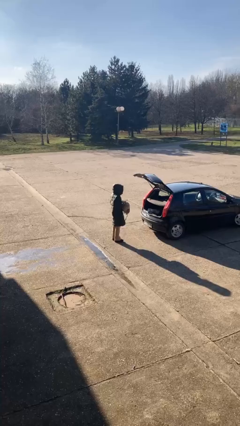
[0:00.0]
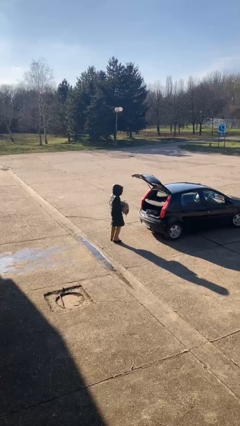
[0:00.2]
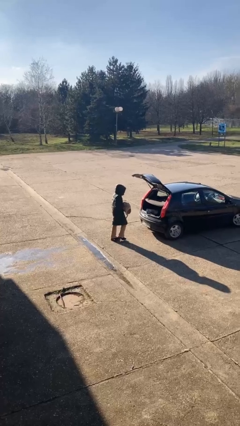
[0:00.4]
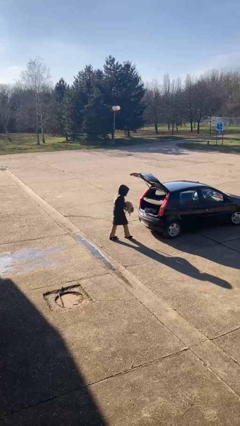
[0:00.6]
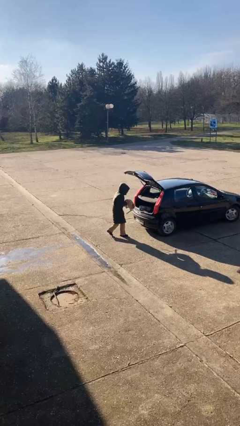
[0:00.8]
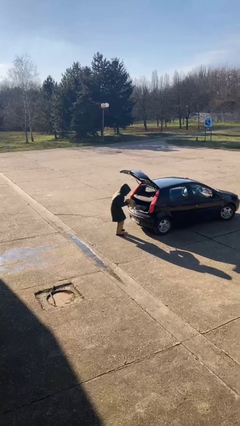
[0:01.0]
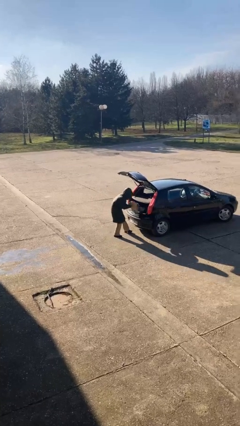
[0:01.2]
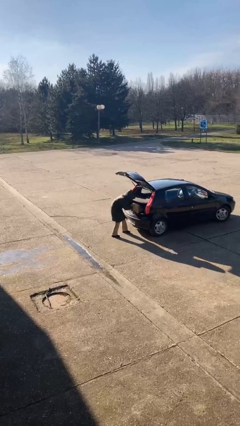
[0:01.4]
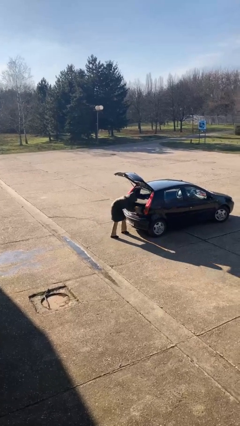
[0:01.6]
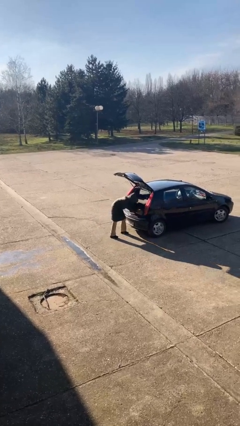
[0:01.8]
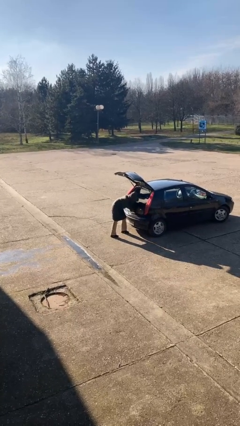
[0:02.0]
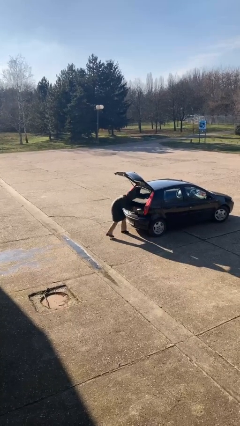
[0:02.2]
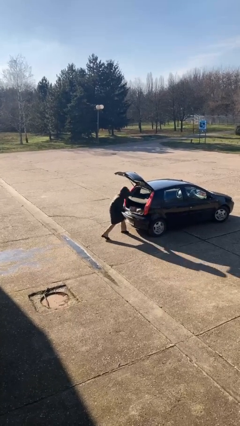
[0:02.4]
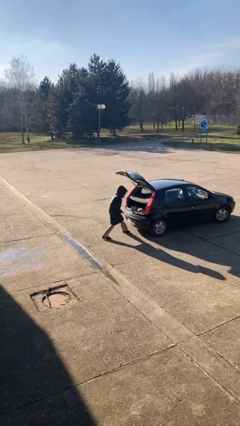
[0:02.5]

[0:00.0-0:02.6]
person loads car

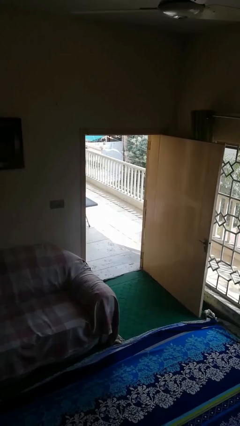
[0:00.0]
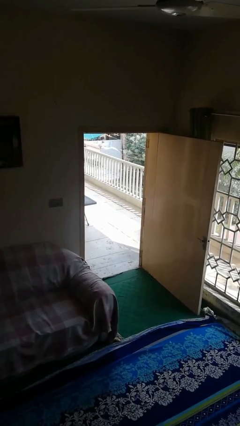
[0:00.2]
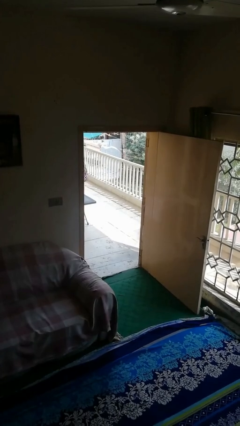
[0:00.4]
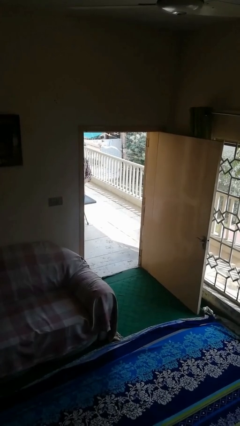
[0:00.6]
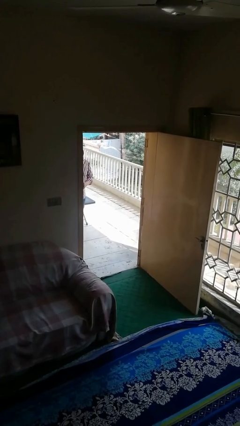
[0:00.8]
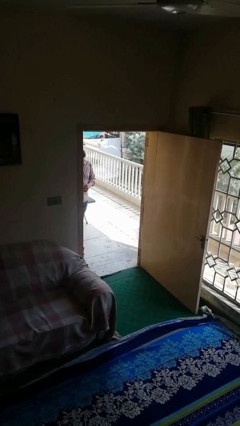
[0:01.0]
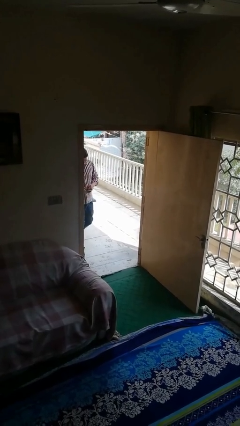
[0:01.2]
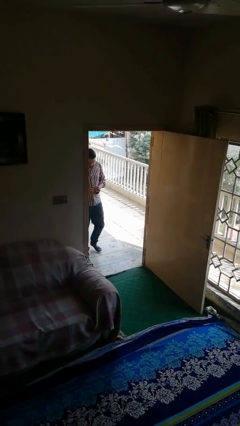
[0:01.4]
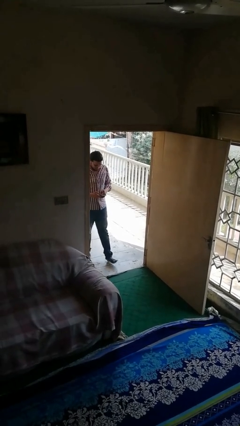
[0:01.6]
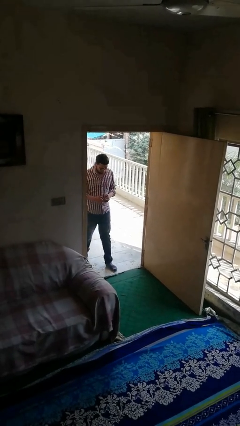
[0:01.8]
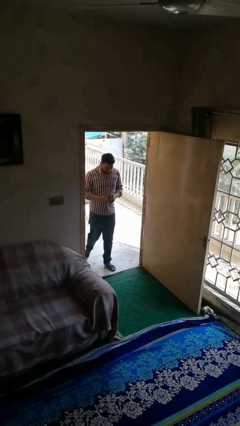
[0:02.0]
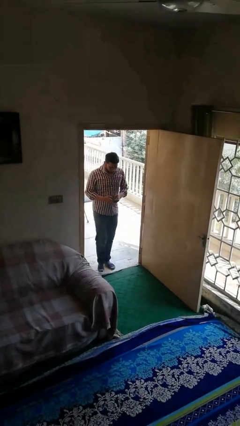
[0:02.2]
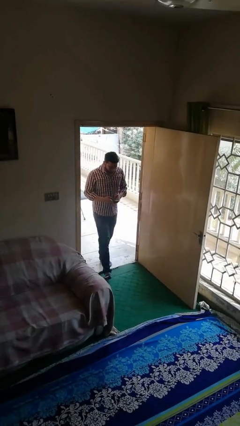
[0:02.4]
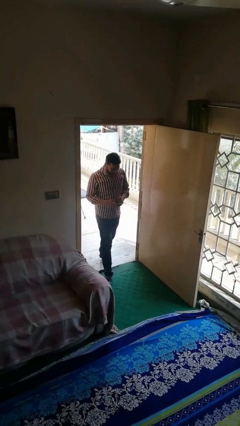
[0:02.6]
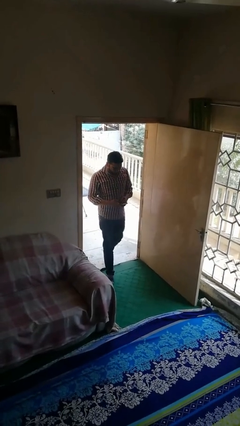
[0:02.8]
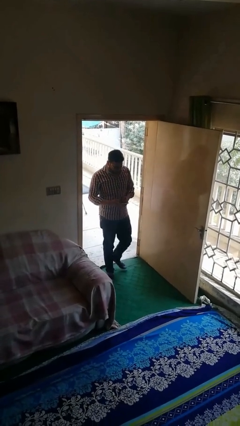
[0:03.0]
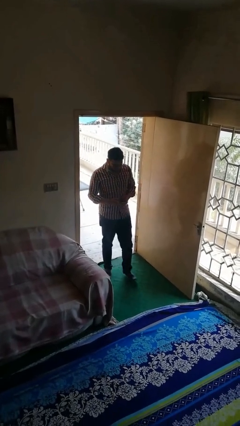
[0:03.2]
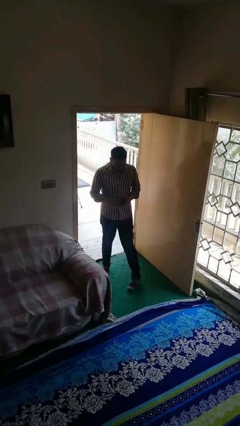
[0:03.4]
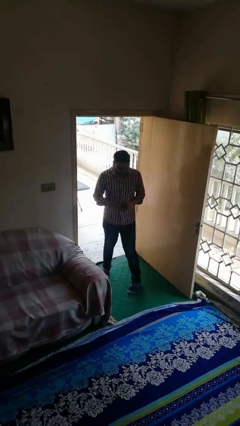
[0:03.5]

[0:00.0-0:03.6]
person enters scene through structure

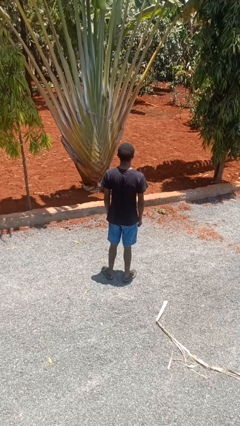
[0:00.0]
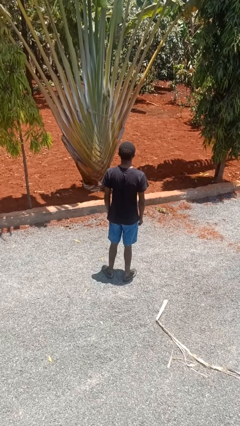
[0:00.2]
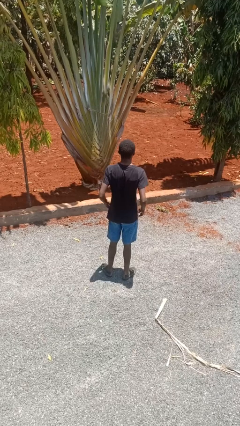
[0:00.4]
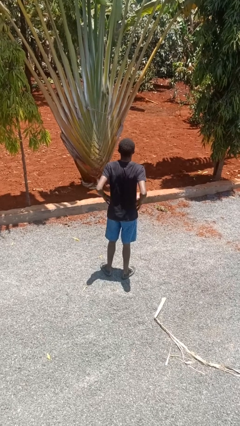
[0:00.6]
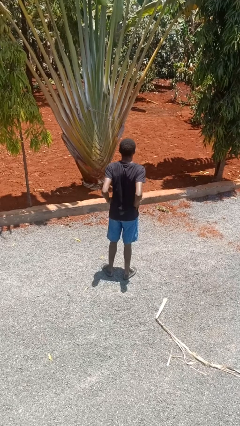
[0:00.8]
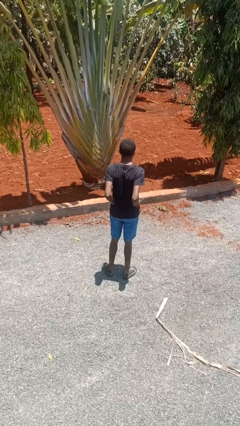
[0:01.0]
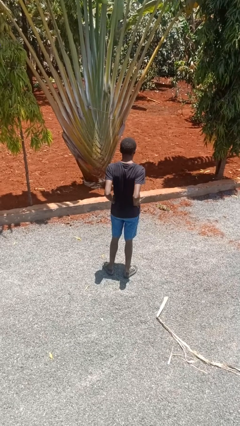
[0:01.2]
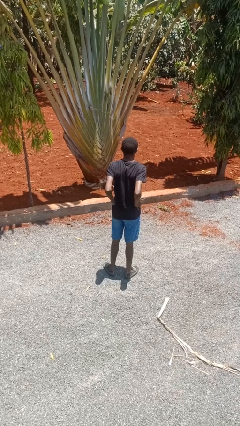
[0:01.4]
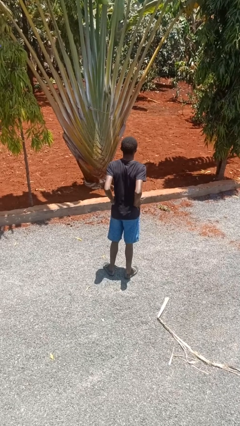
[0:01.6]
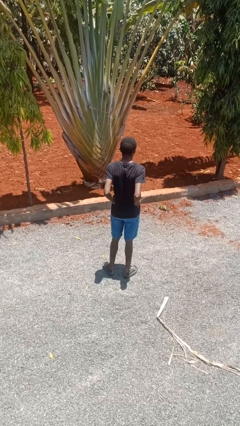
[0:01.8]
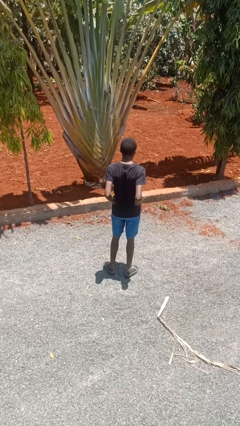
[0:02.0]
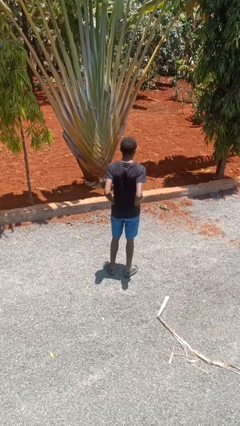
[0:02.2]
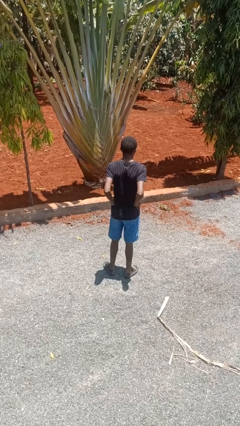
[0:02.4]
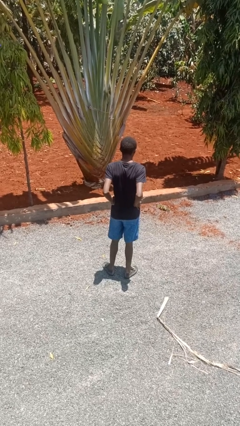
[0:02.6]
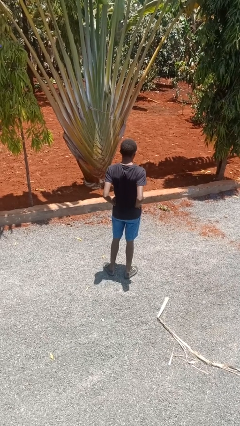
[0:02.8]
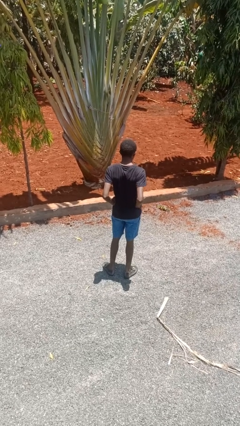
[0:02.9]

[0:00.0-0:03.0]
person wiggles hips

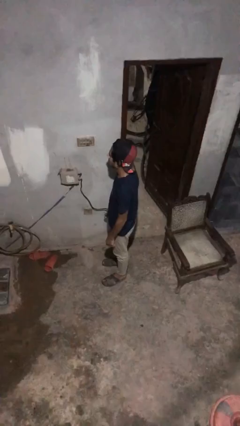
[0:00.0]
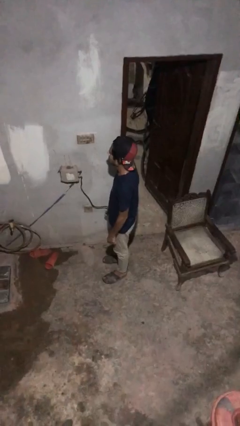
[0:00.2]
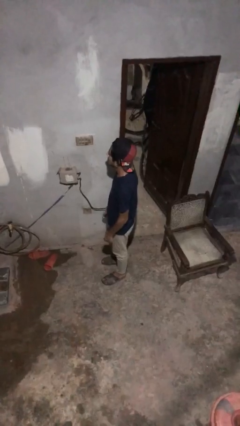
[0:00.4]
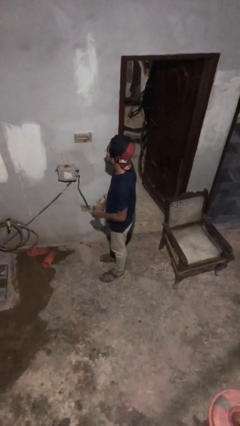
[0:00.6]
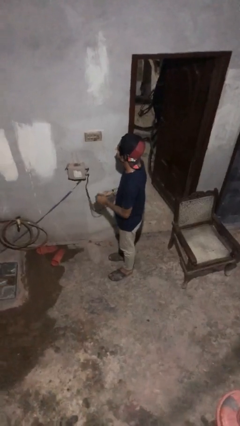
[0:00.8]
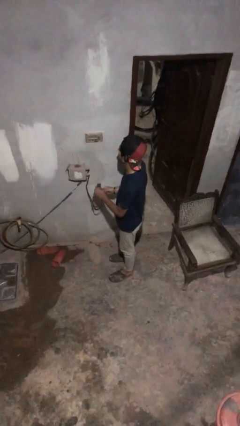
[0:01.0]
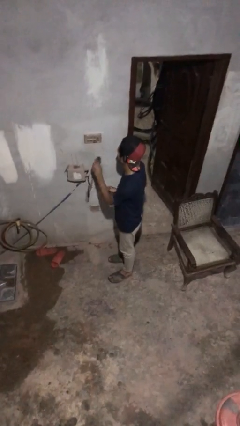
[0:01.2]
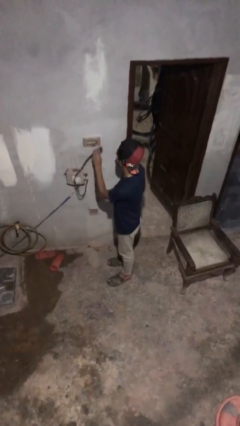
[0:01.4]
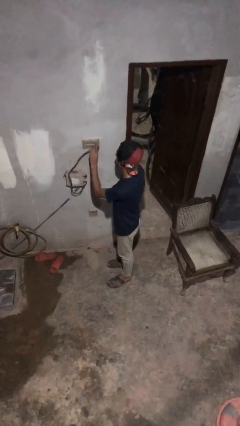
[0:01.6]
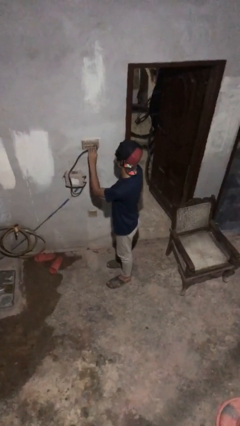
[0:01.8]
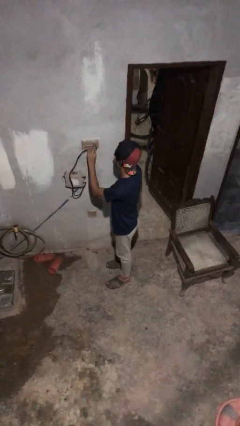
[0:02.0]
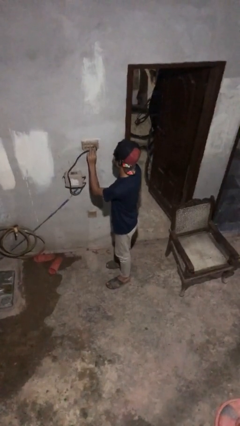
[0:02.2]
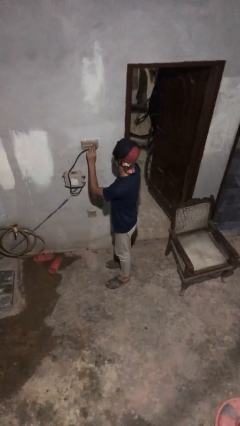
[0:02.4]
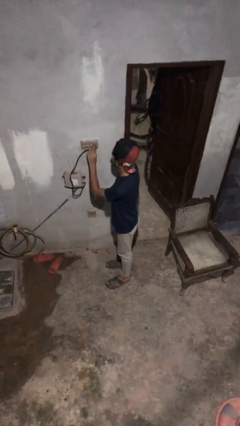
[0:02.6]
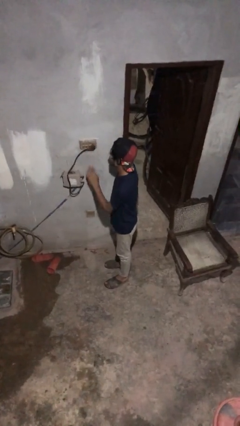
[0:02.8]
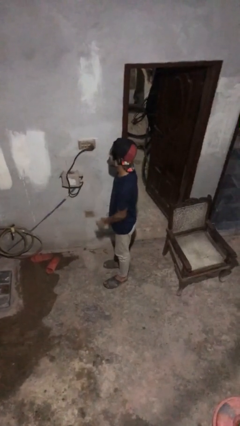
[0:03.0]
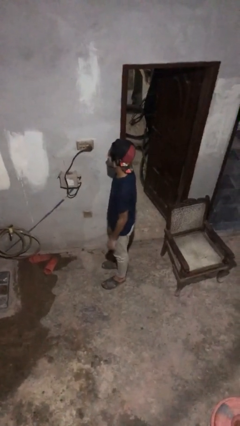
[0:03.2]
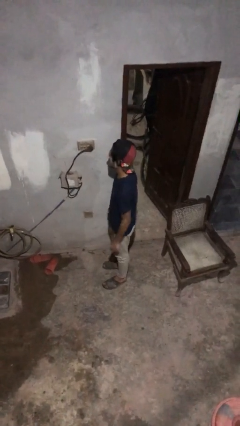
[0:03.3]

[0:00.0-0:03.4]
person plugs into electrical socket

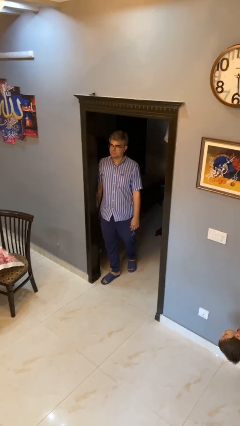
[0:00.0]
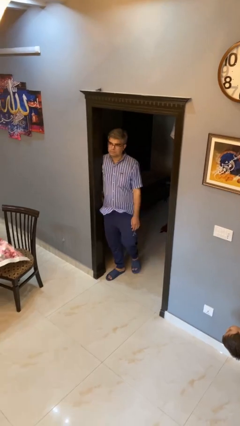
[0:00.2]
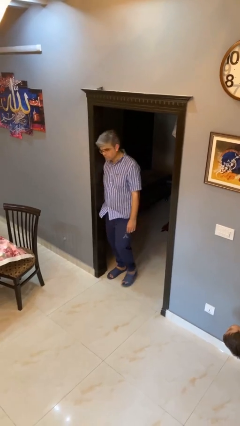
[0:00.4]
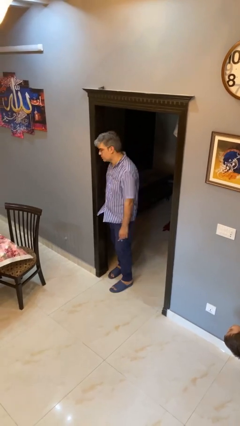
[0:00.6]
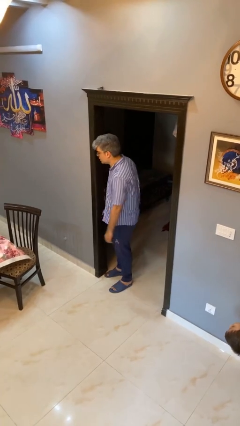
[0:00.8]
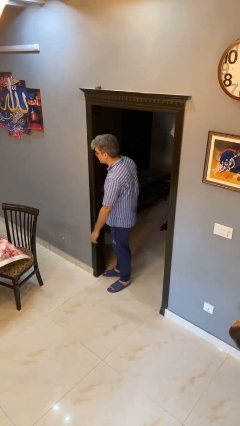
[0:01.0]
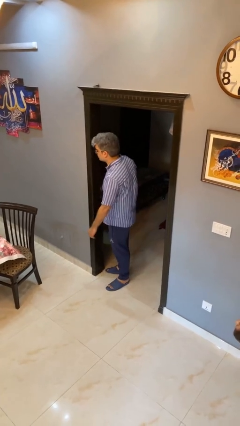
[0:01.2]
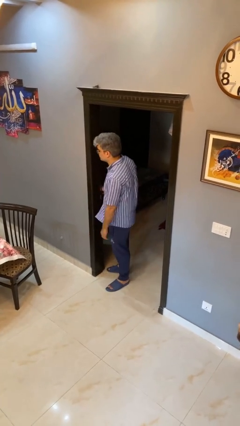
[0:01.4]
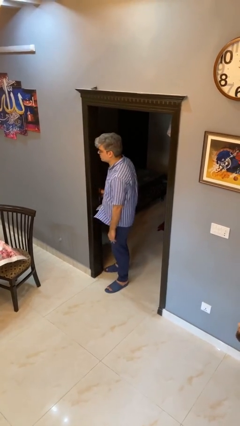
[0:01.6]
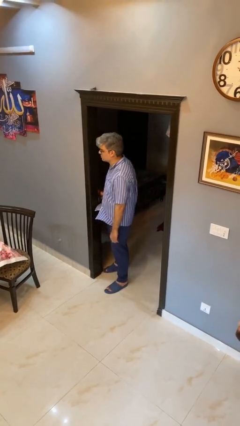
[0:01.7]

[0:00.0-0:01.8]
person bumps into wall

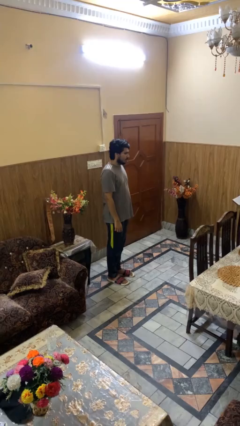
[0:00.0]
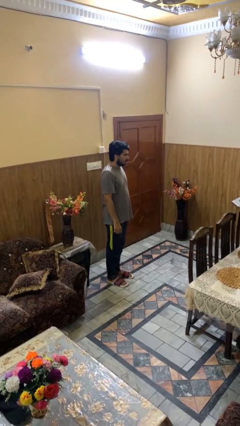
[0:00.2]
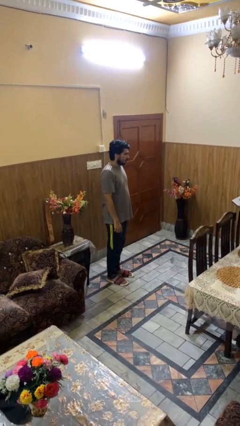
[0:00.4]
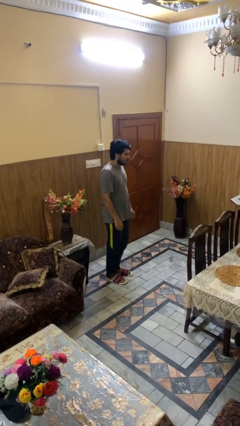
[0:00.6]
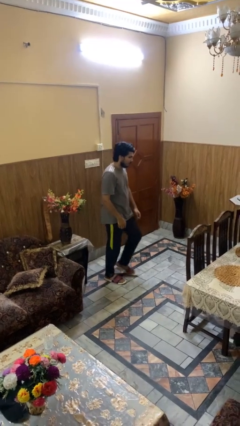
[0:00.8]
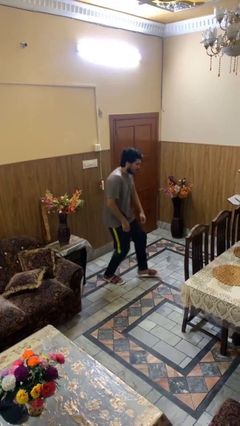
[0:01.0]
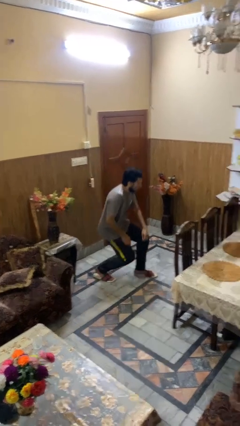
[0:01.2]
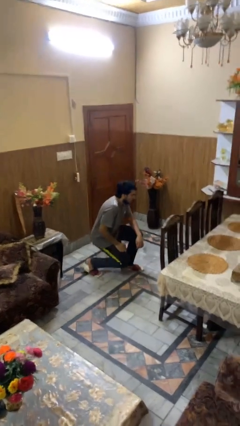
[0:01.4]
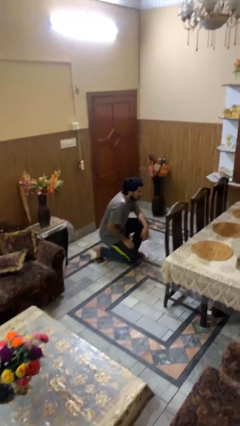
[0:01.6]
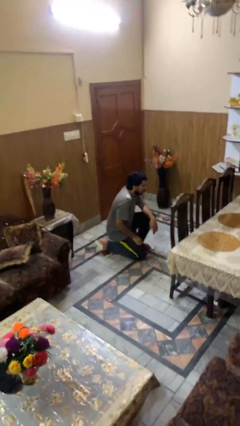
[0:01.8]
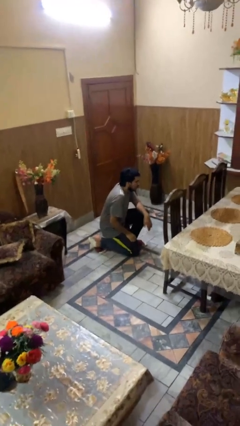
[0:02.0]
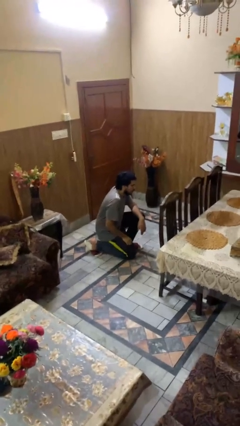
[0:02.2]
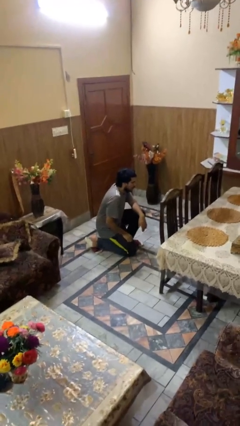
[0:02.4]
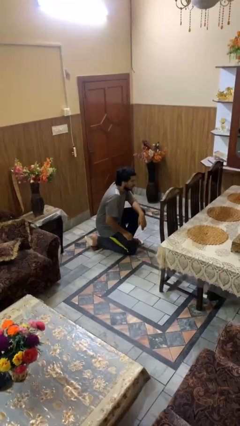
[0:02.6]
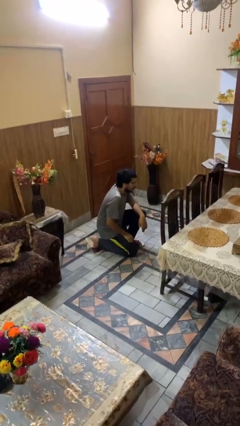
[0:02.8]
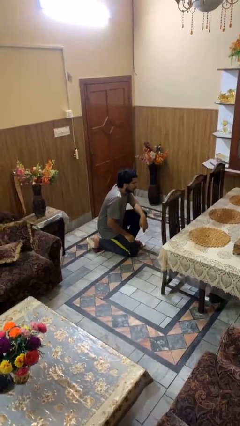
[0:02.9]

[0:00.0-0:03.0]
person kneels

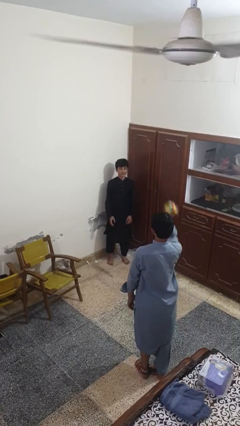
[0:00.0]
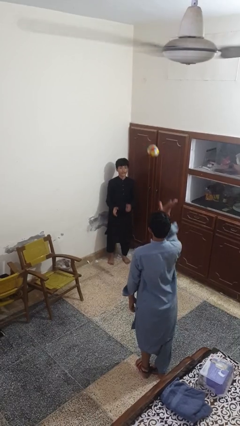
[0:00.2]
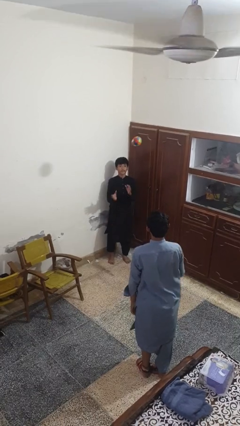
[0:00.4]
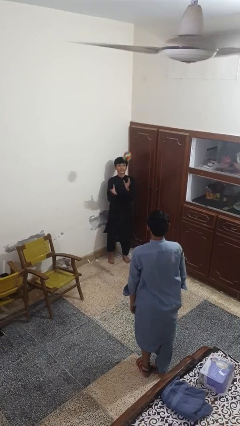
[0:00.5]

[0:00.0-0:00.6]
person catches object from person
